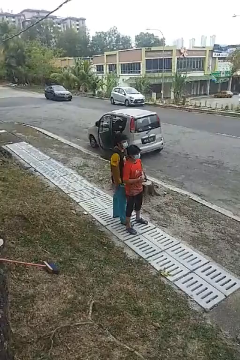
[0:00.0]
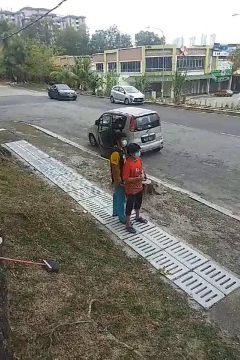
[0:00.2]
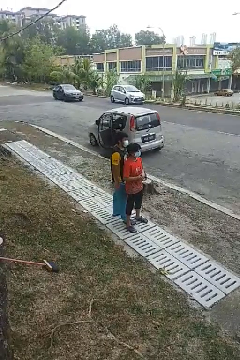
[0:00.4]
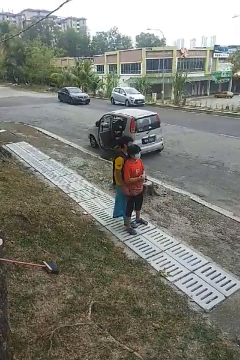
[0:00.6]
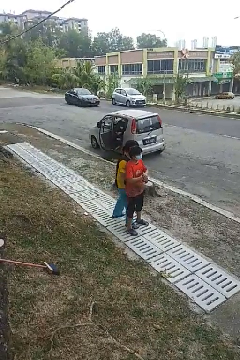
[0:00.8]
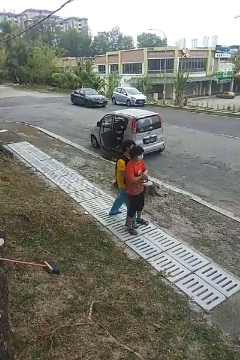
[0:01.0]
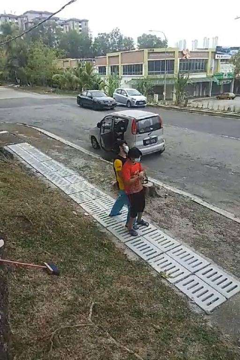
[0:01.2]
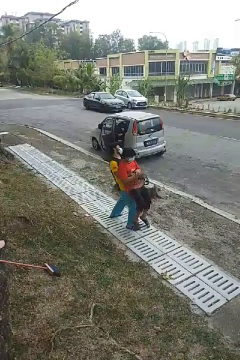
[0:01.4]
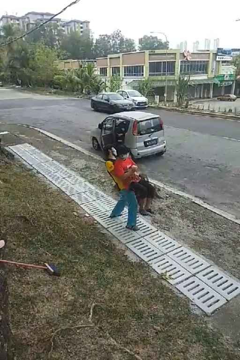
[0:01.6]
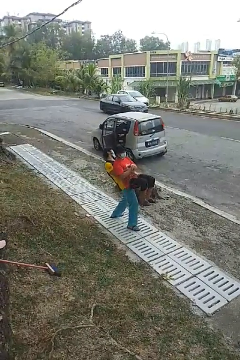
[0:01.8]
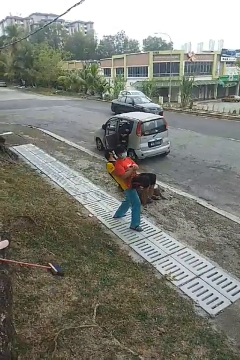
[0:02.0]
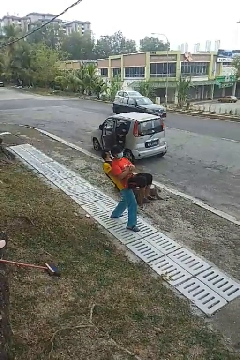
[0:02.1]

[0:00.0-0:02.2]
person picks up person

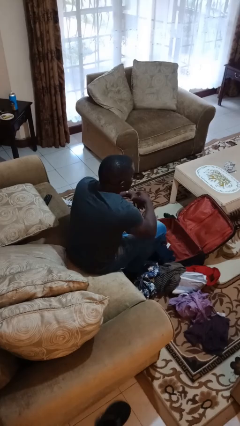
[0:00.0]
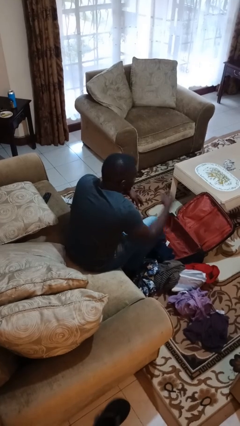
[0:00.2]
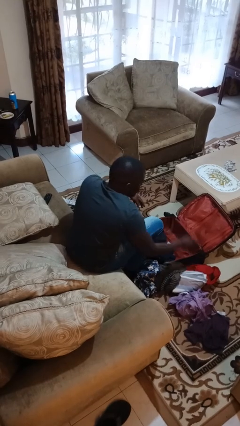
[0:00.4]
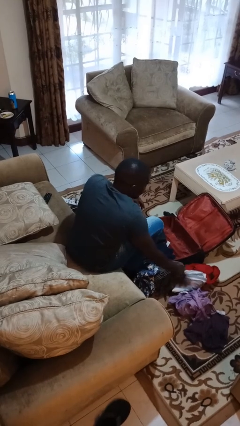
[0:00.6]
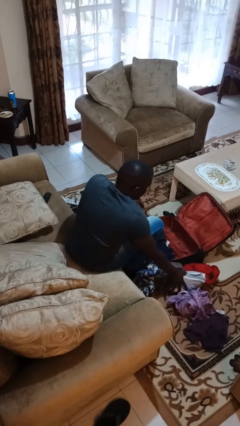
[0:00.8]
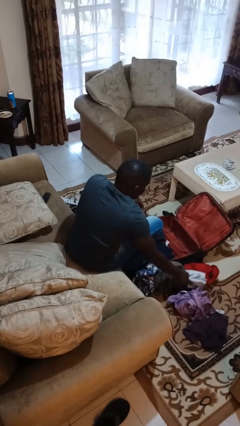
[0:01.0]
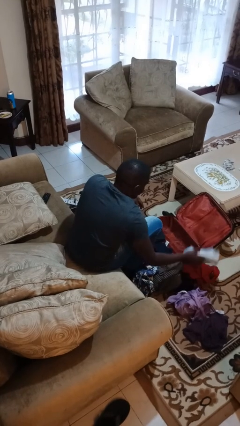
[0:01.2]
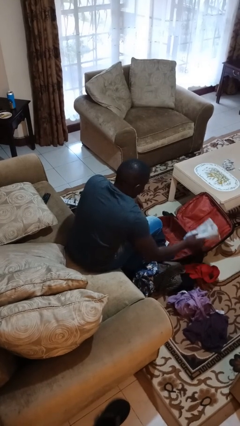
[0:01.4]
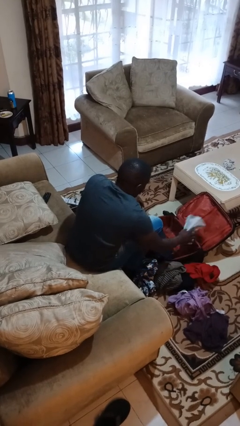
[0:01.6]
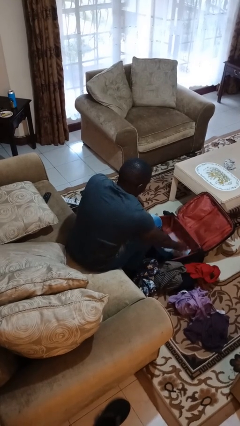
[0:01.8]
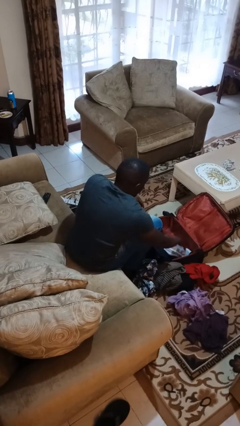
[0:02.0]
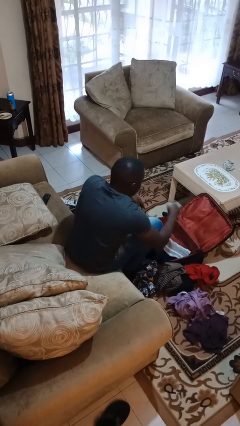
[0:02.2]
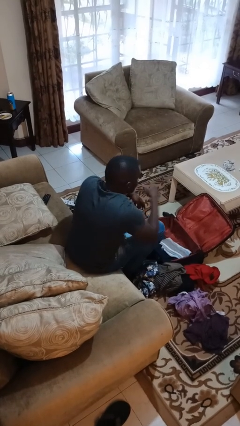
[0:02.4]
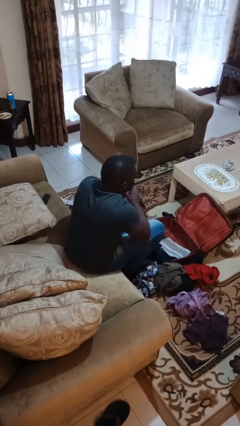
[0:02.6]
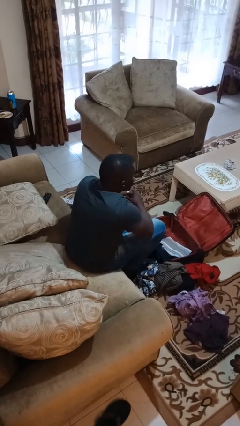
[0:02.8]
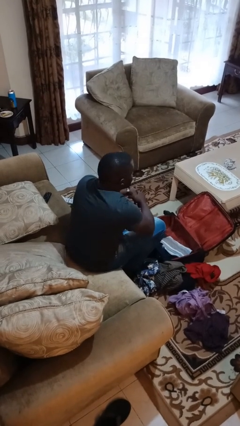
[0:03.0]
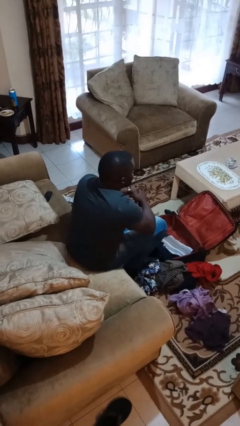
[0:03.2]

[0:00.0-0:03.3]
person loads clothes into suitcase

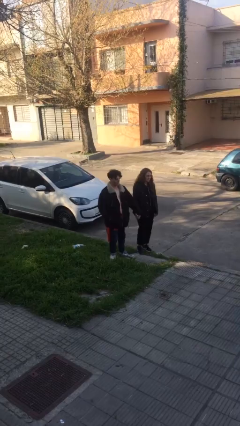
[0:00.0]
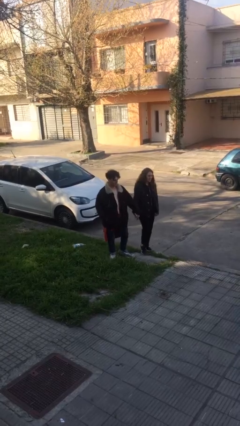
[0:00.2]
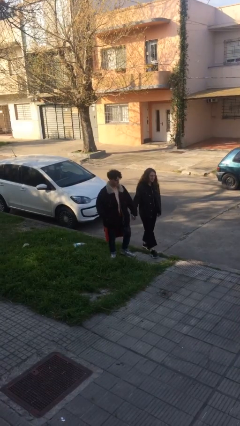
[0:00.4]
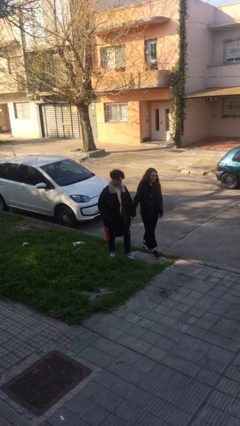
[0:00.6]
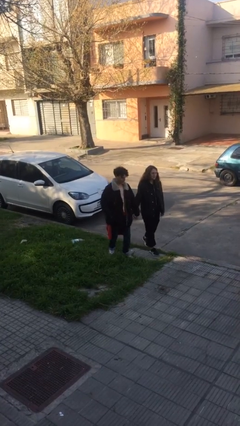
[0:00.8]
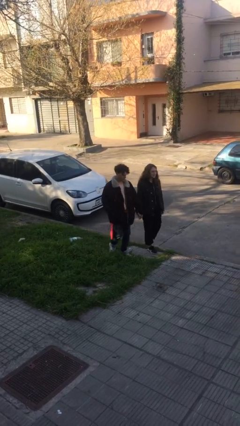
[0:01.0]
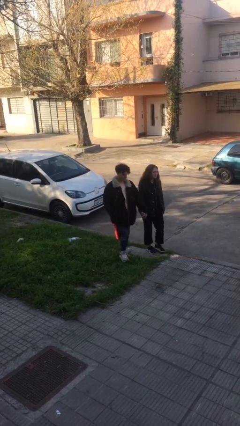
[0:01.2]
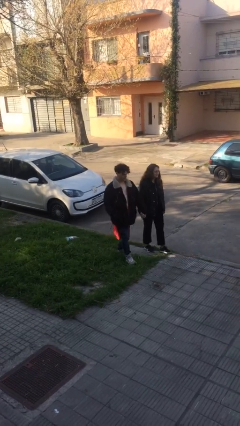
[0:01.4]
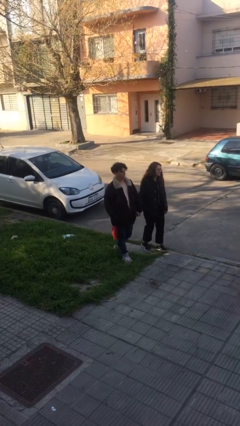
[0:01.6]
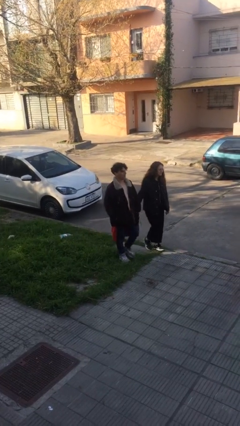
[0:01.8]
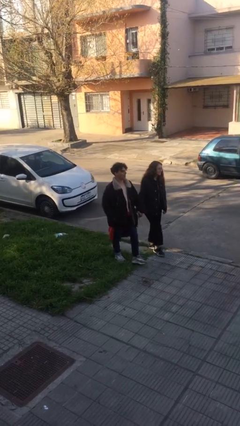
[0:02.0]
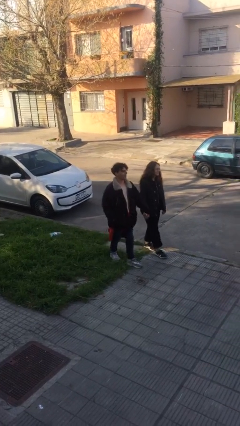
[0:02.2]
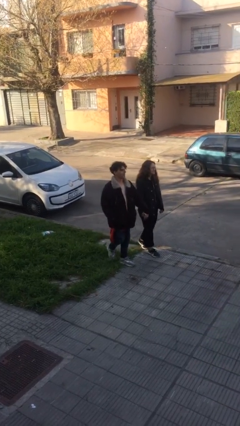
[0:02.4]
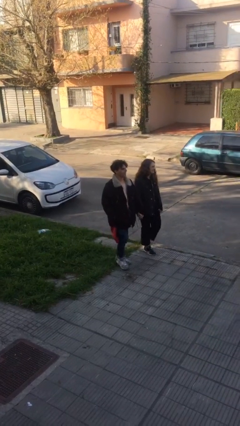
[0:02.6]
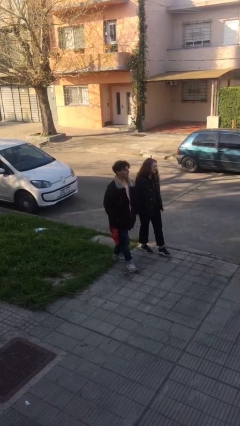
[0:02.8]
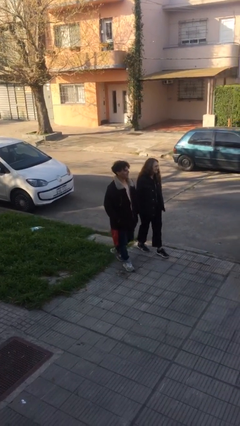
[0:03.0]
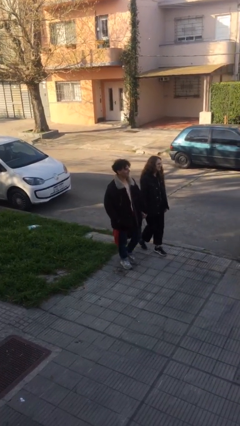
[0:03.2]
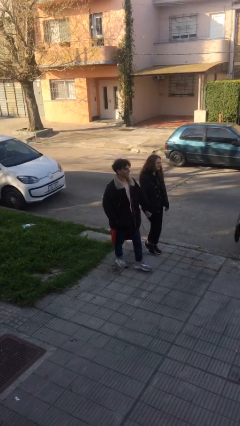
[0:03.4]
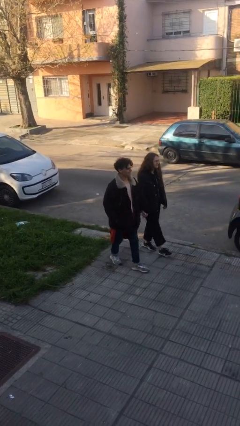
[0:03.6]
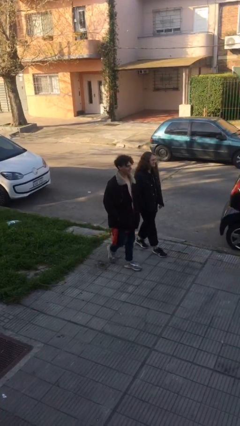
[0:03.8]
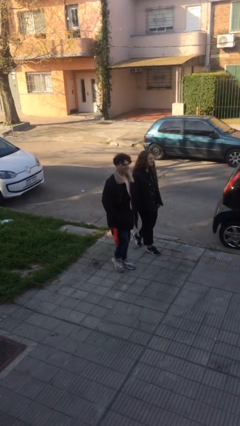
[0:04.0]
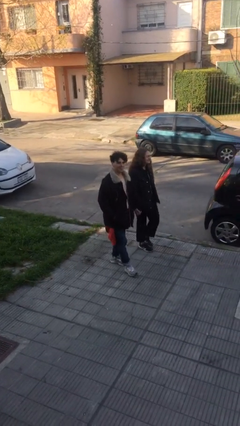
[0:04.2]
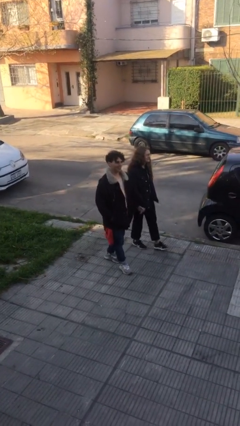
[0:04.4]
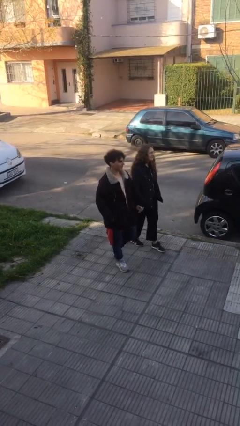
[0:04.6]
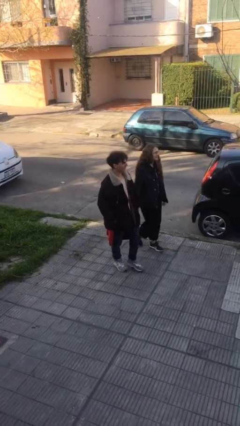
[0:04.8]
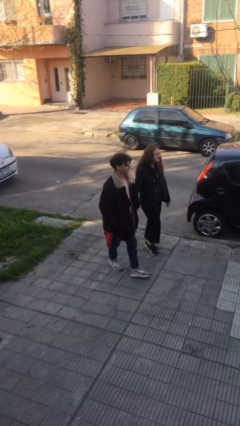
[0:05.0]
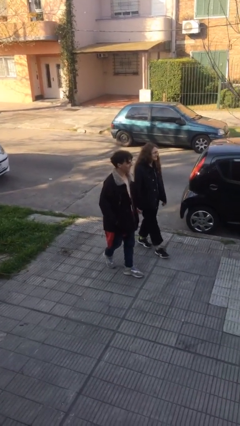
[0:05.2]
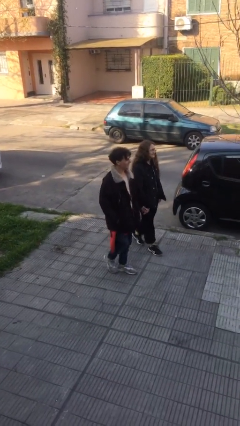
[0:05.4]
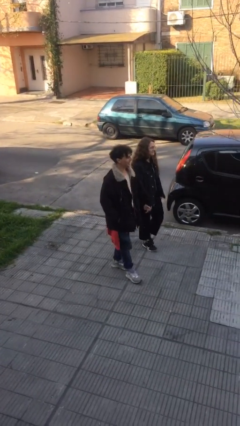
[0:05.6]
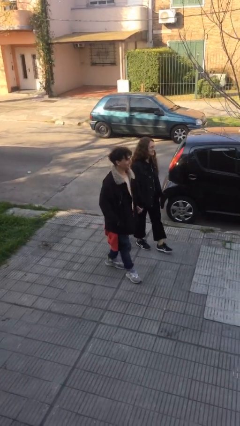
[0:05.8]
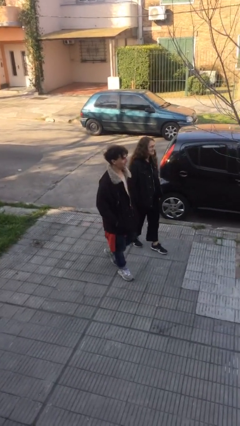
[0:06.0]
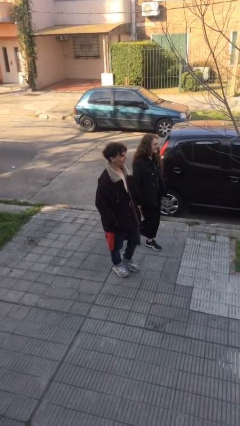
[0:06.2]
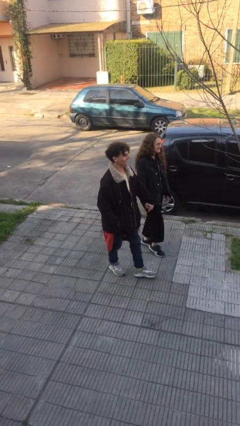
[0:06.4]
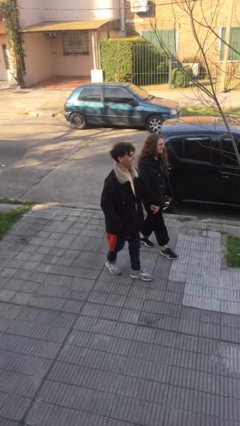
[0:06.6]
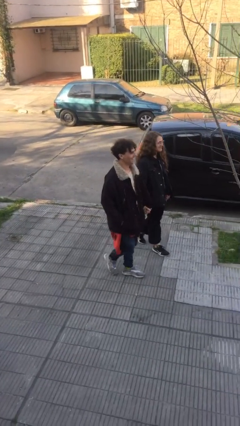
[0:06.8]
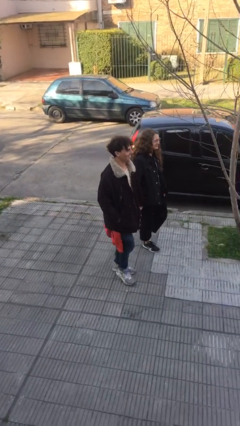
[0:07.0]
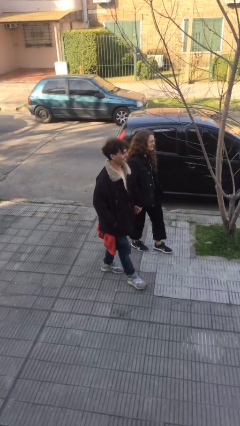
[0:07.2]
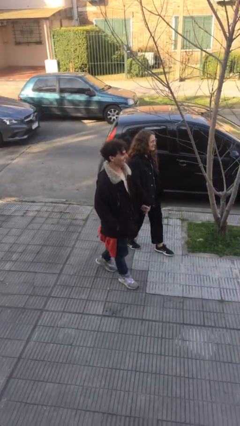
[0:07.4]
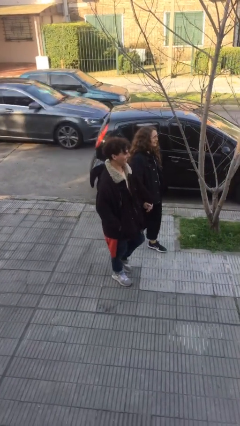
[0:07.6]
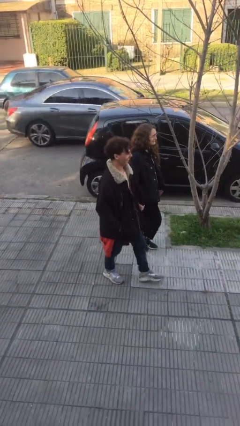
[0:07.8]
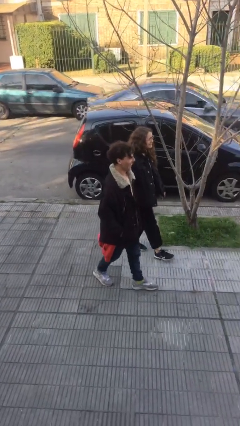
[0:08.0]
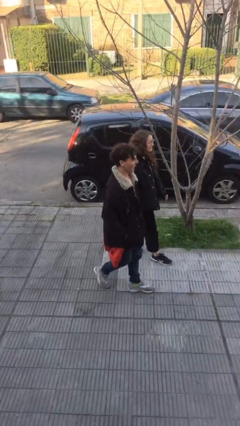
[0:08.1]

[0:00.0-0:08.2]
person holds hand

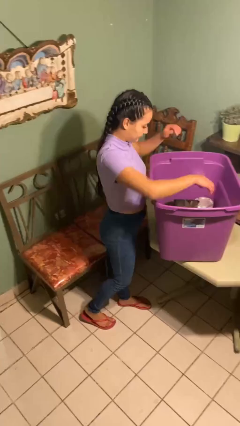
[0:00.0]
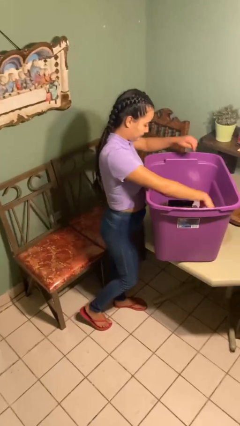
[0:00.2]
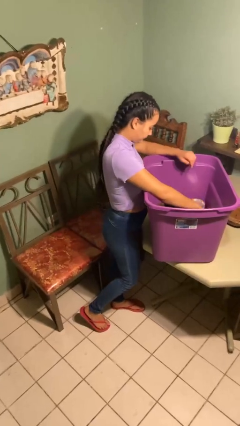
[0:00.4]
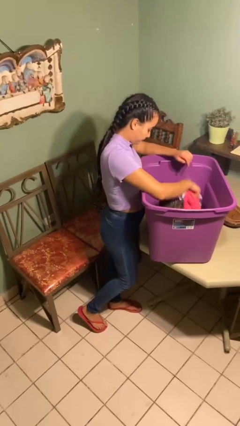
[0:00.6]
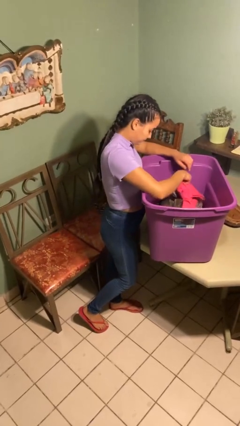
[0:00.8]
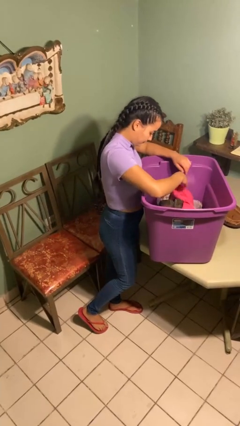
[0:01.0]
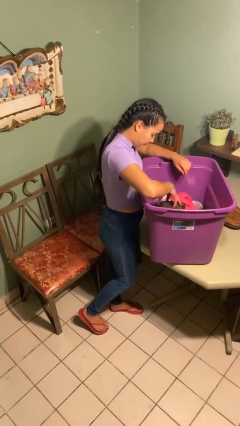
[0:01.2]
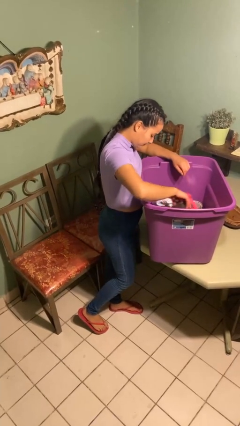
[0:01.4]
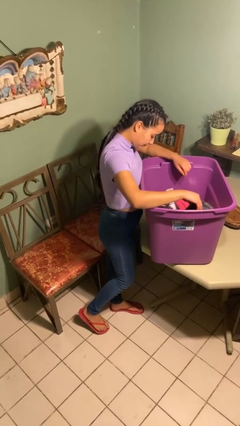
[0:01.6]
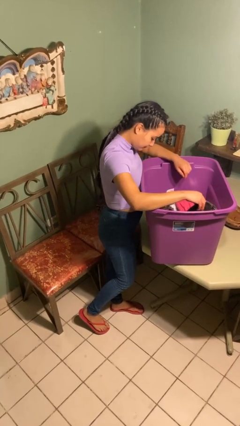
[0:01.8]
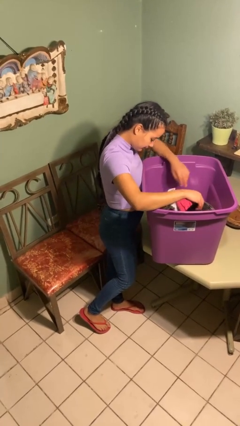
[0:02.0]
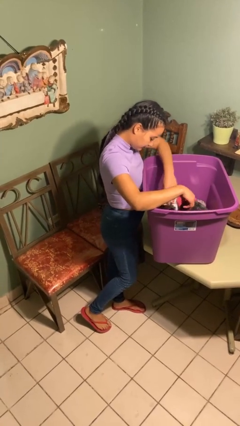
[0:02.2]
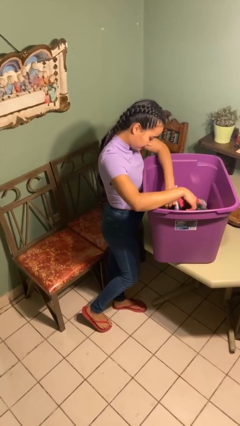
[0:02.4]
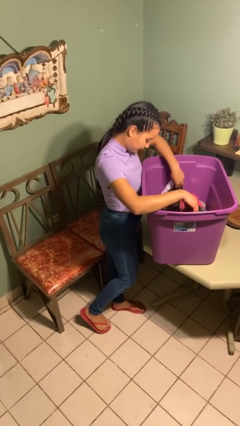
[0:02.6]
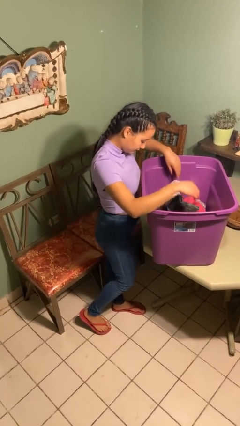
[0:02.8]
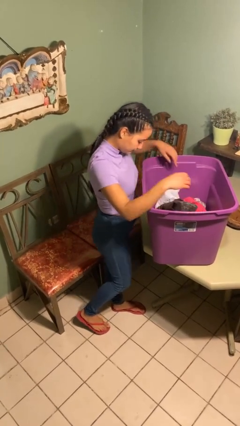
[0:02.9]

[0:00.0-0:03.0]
person searches in box

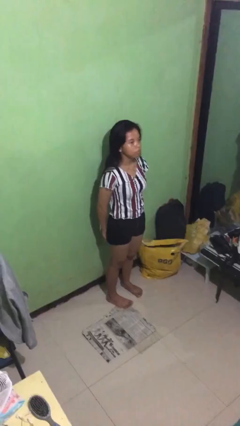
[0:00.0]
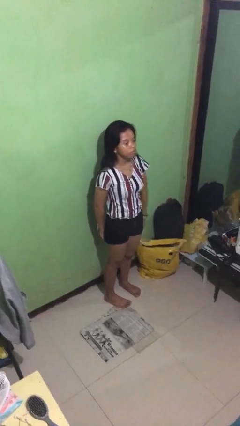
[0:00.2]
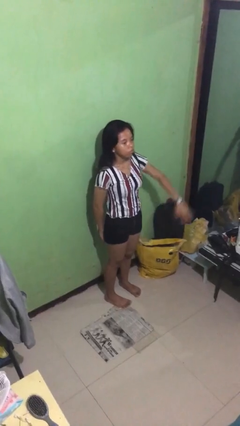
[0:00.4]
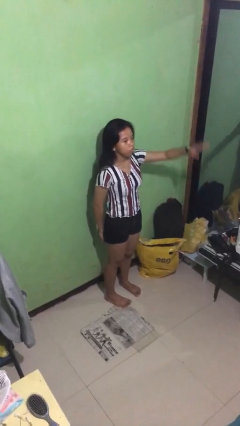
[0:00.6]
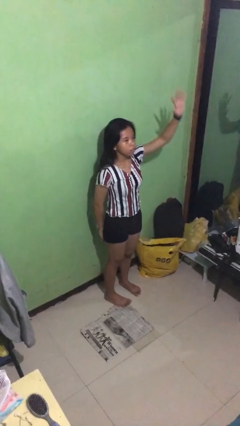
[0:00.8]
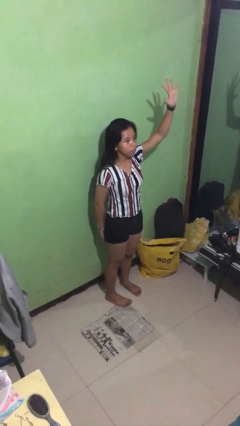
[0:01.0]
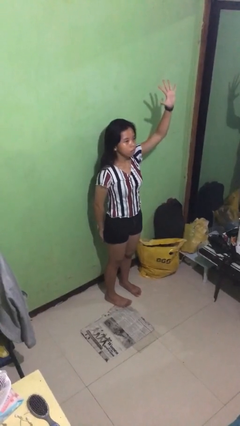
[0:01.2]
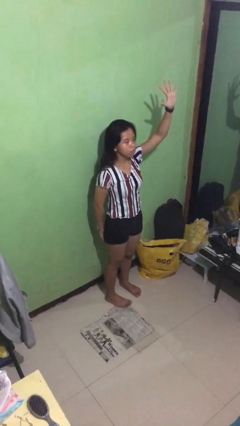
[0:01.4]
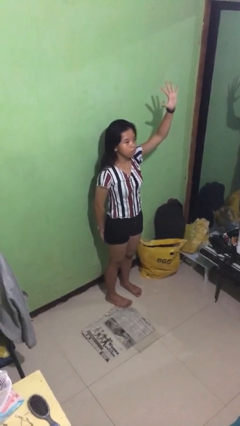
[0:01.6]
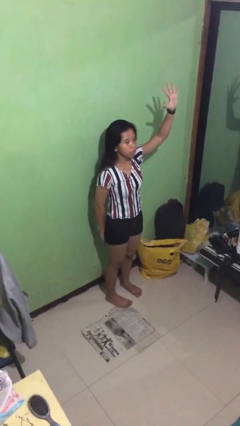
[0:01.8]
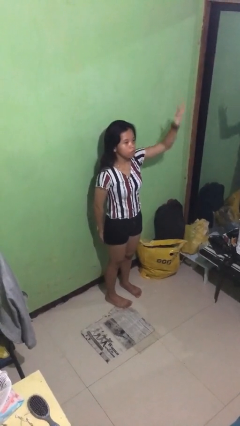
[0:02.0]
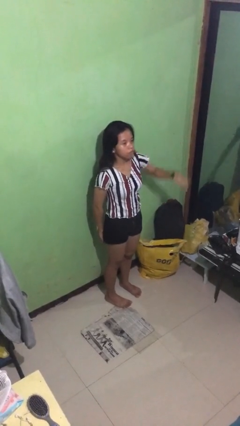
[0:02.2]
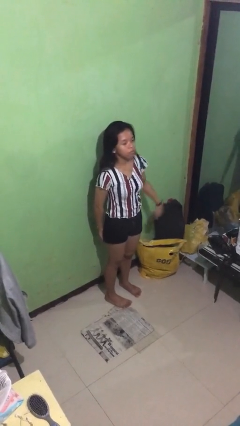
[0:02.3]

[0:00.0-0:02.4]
person gestures number five
